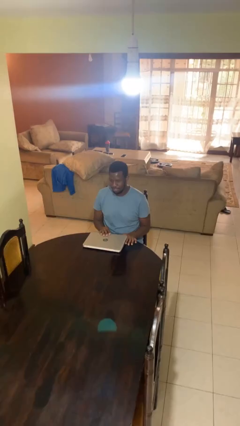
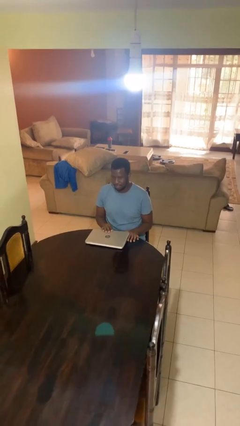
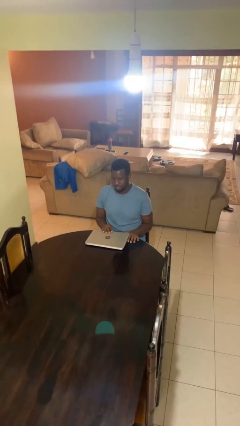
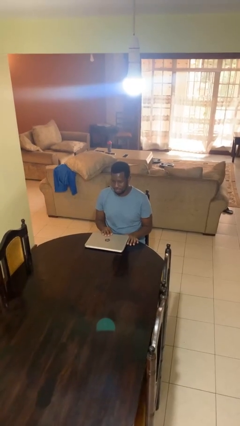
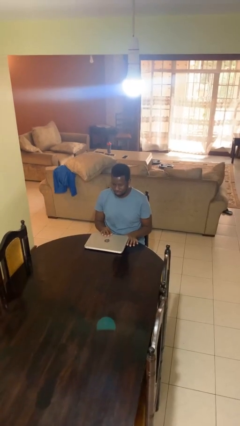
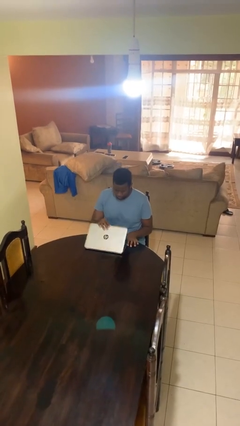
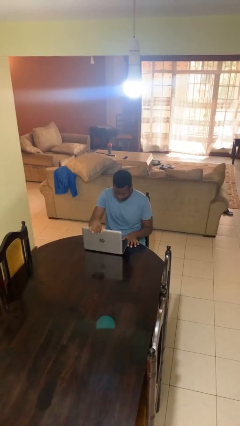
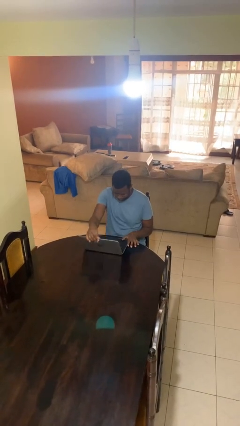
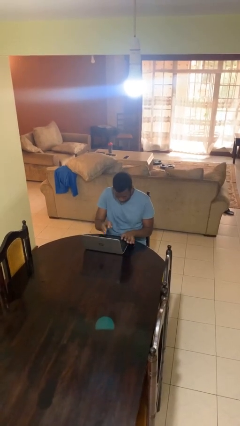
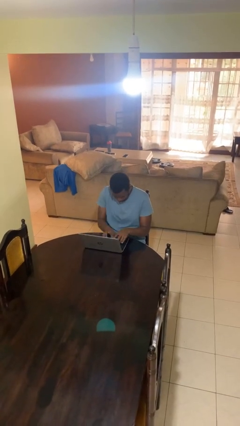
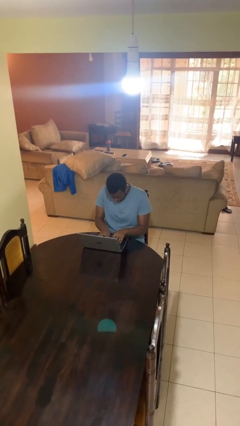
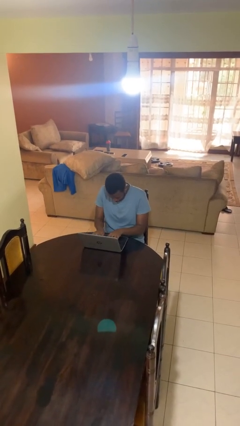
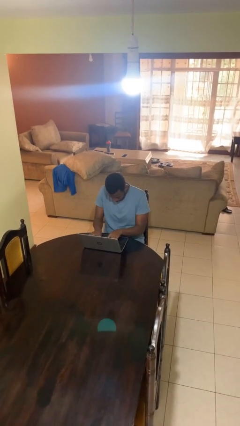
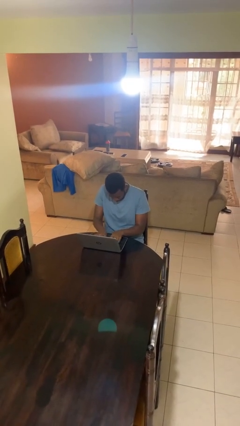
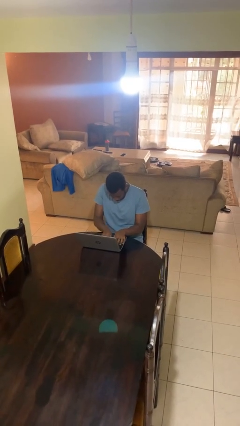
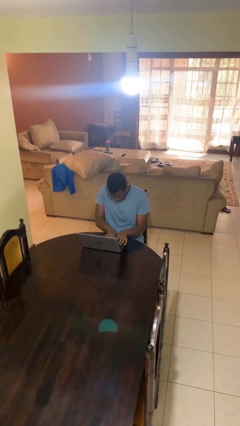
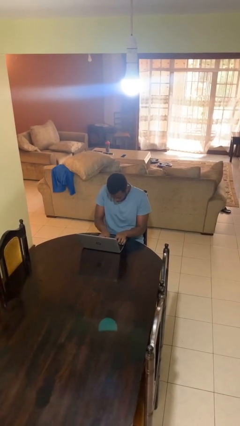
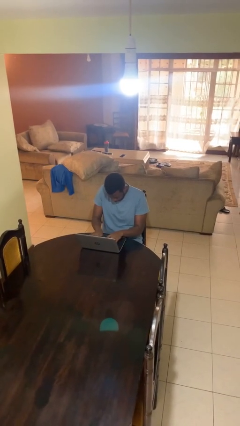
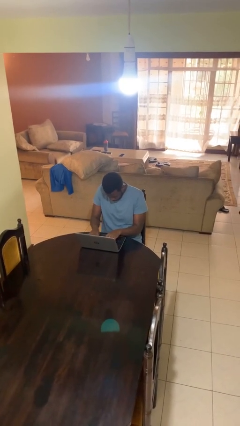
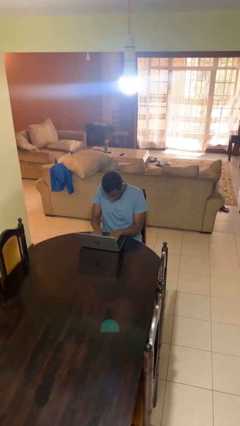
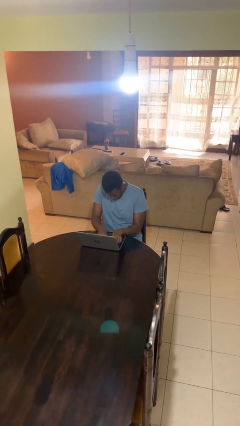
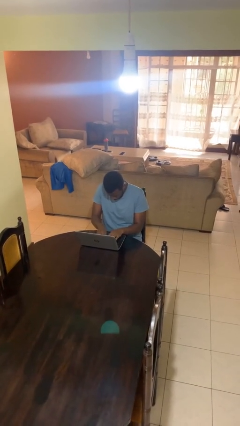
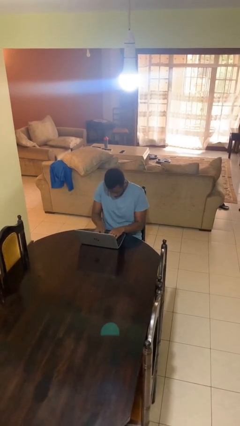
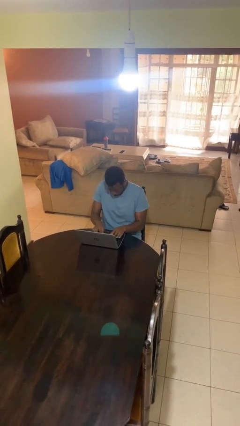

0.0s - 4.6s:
person interacts with laptop

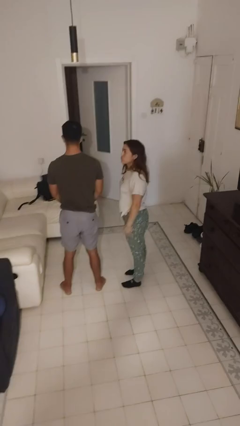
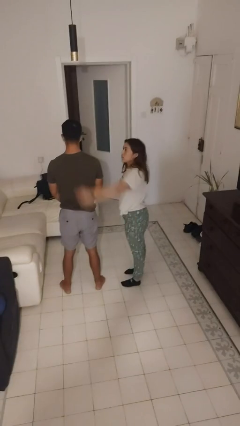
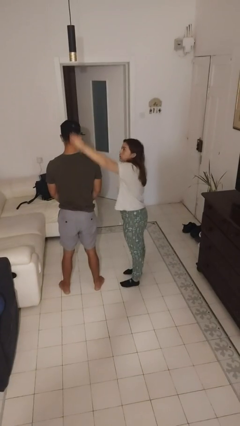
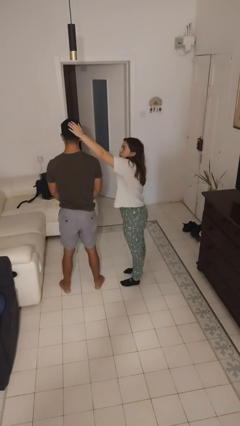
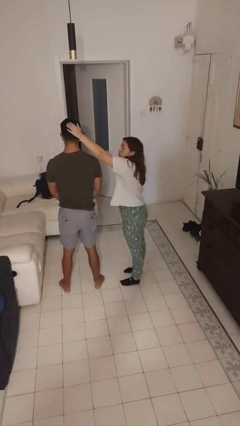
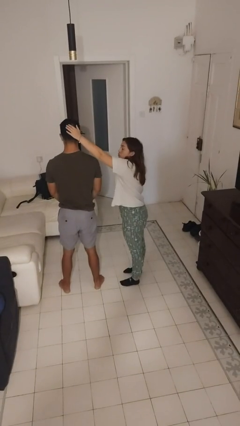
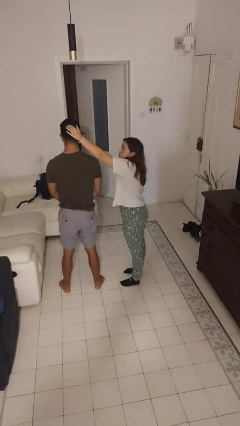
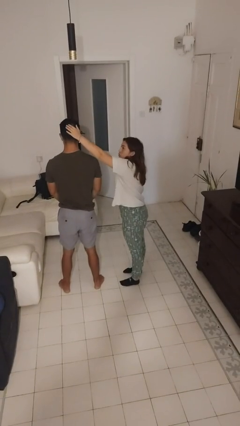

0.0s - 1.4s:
person grabs person by hair

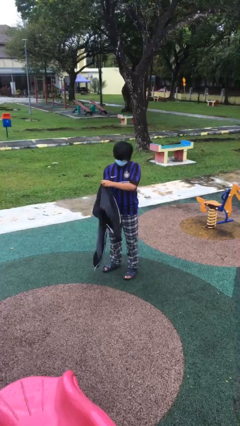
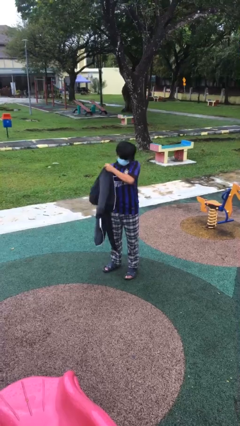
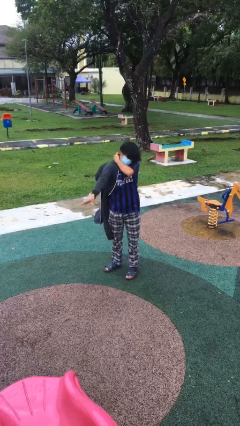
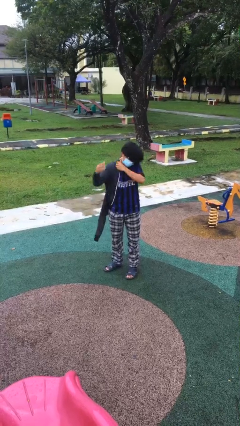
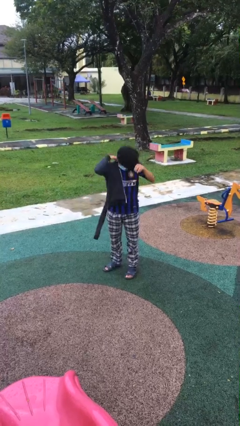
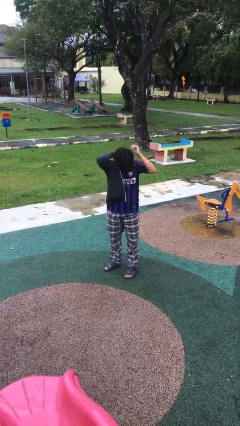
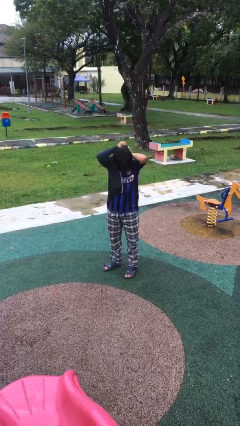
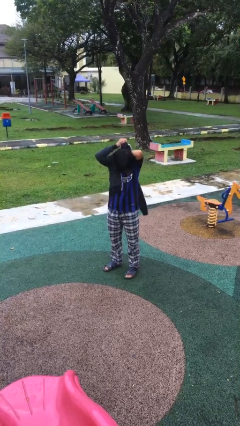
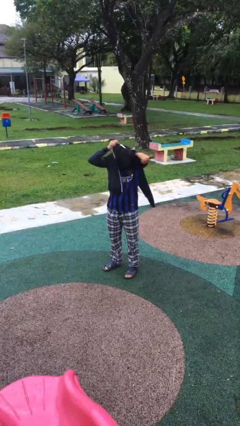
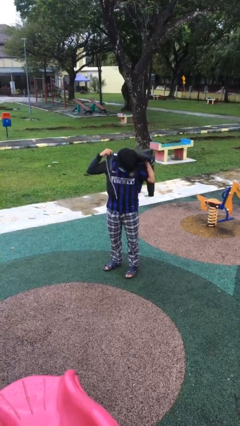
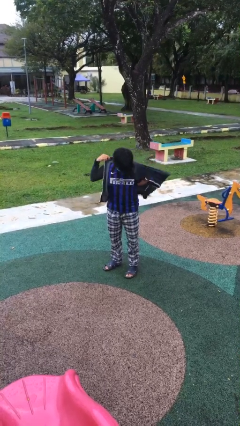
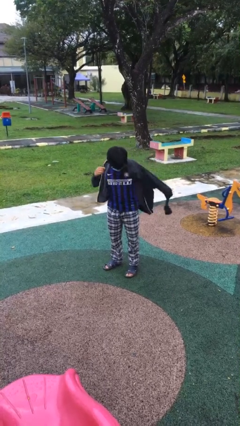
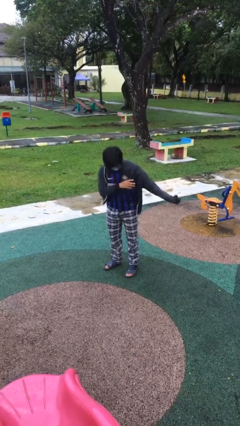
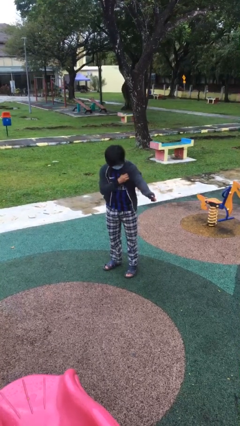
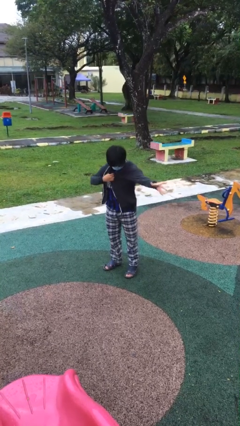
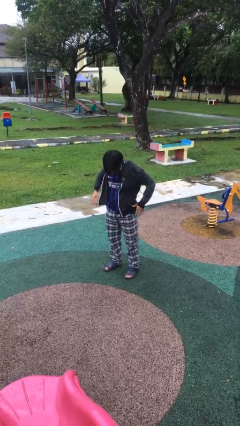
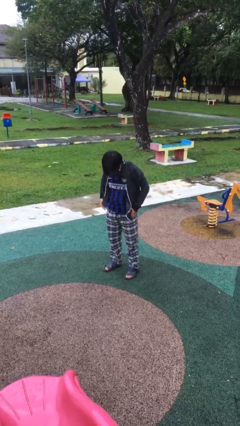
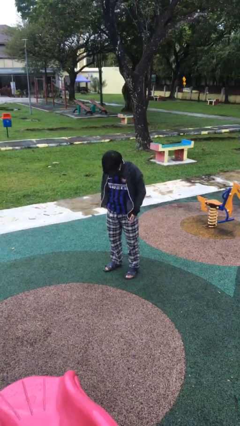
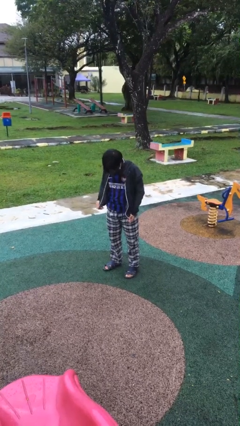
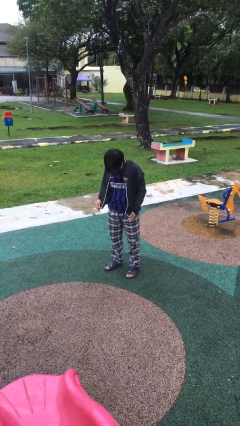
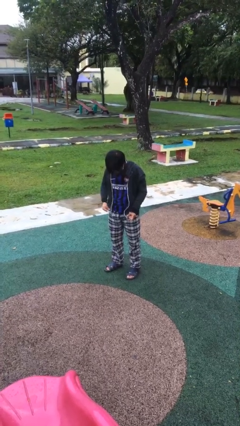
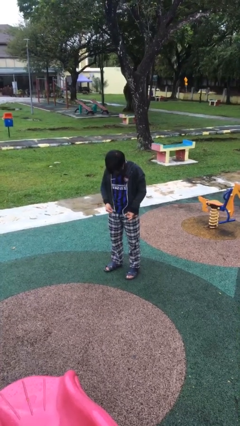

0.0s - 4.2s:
person puts on jacket

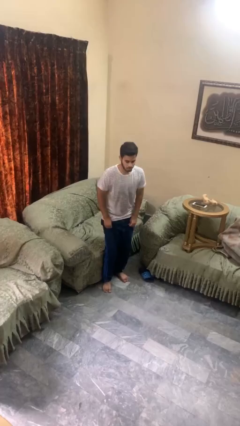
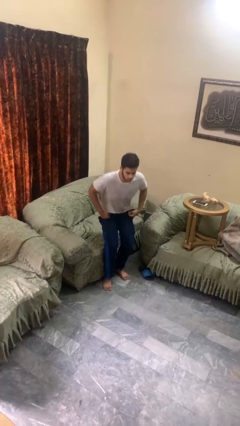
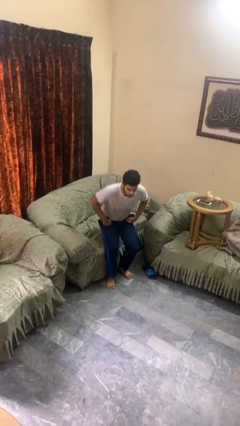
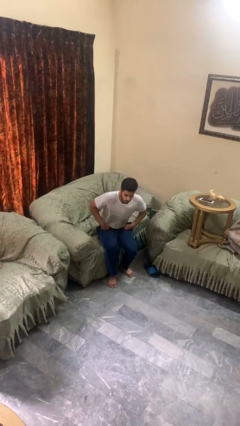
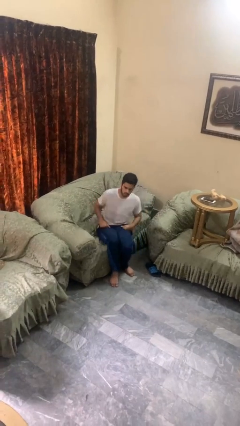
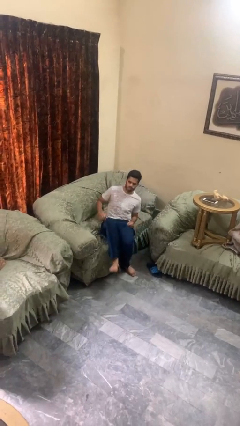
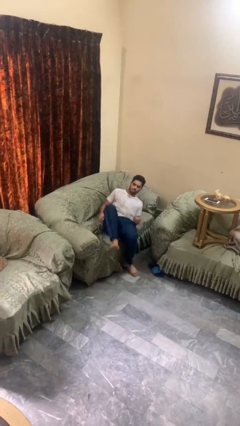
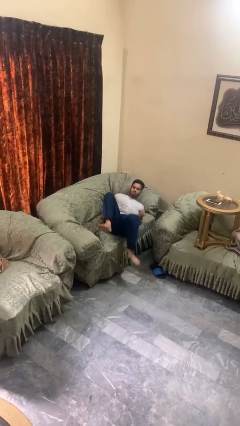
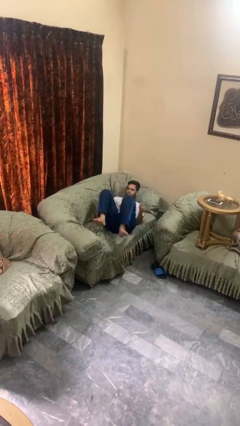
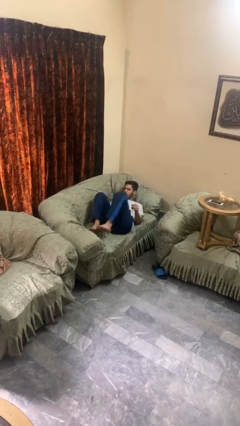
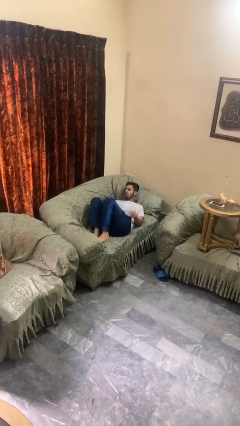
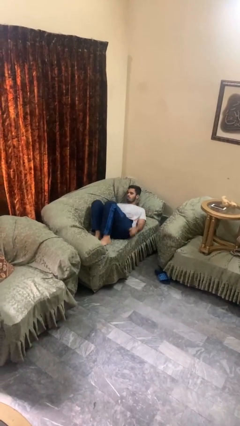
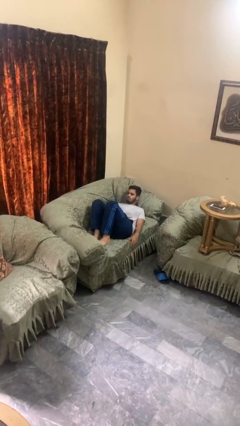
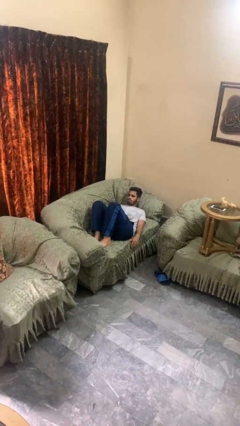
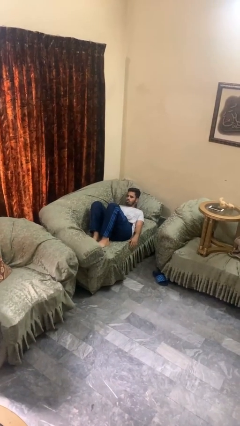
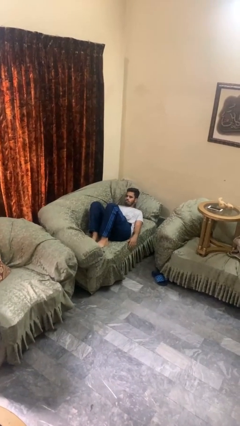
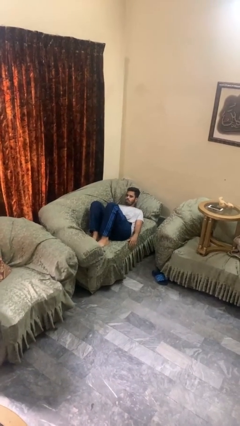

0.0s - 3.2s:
person lies down on couch

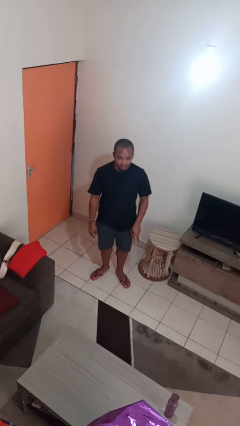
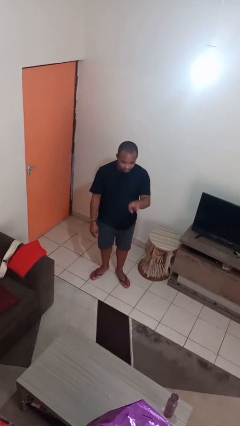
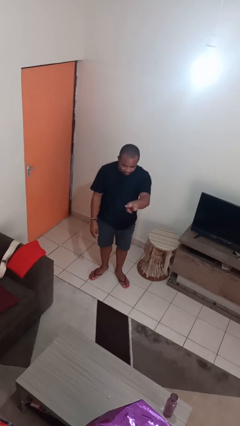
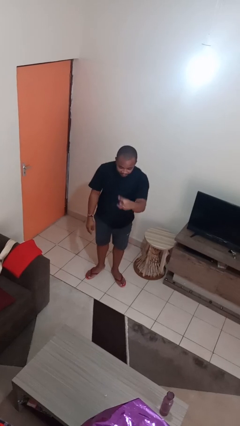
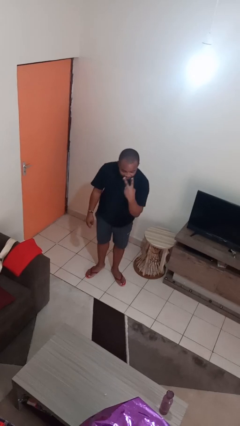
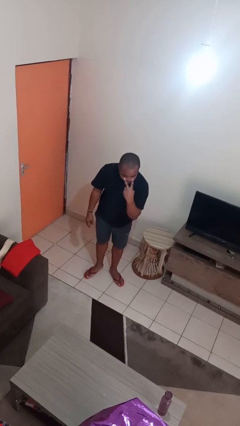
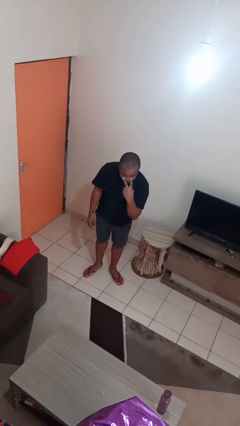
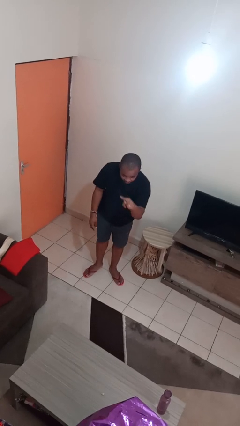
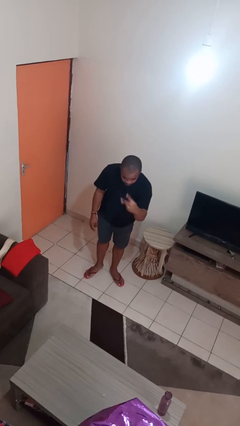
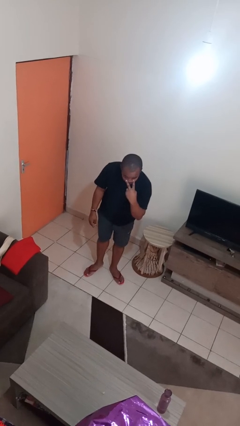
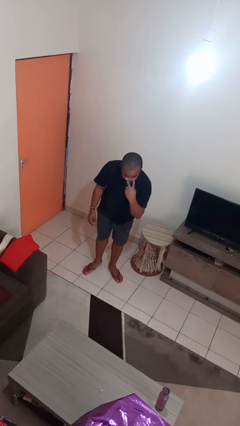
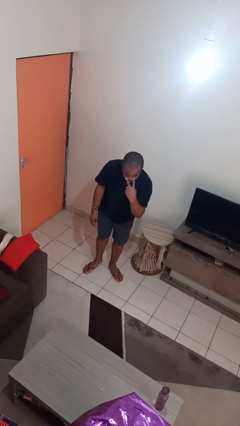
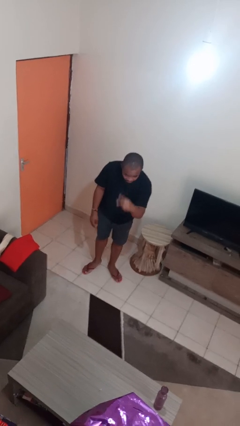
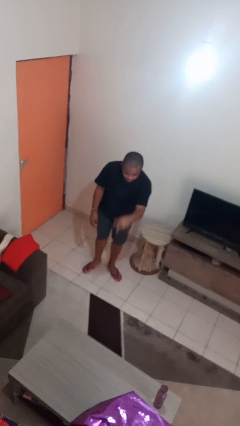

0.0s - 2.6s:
person gestures watch closely

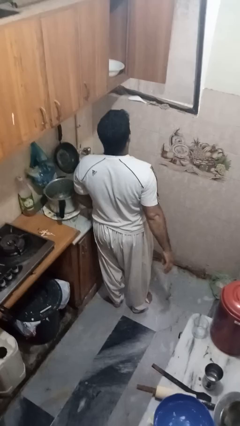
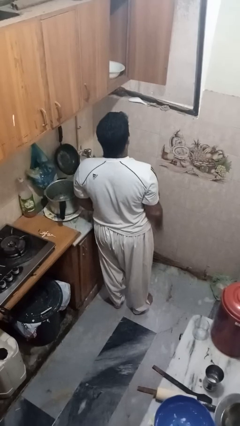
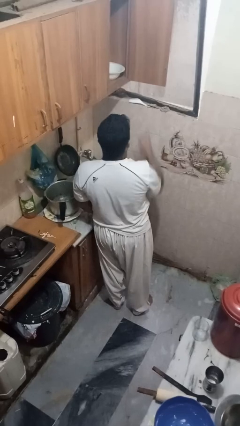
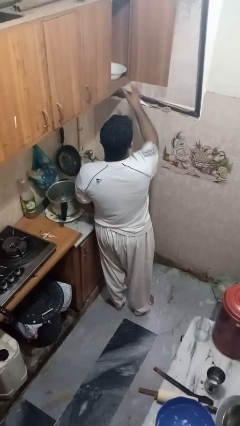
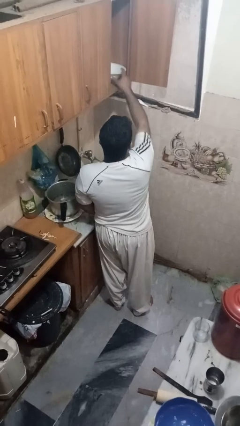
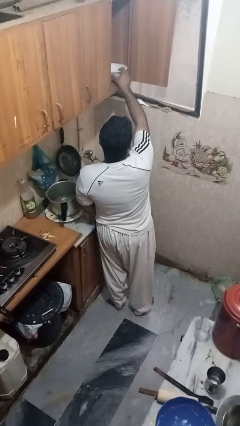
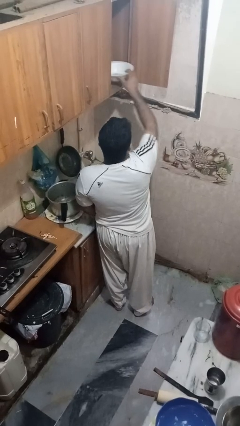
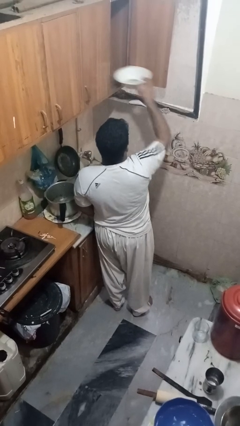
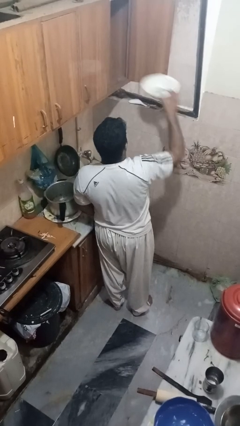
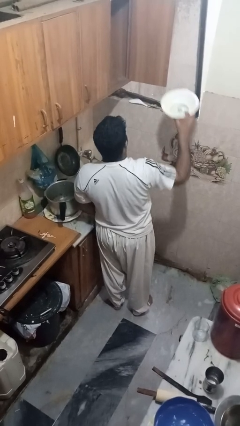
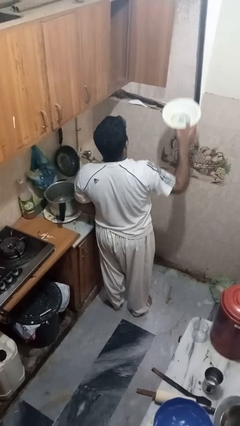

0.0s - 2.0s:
person takes object from cabinet
